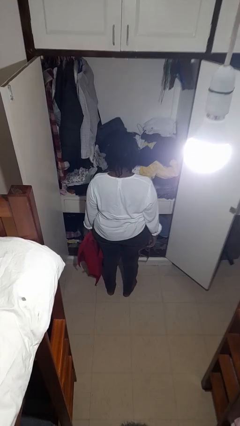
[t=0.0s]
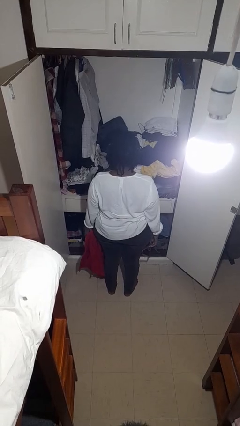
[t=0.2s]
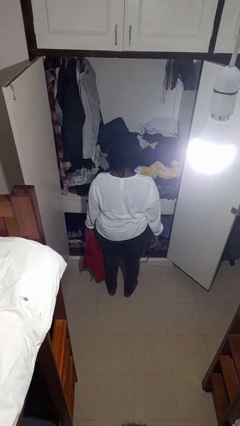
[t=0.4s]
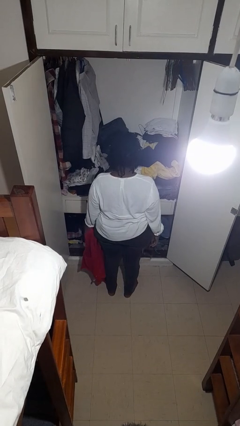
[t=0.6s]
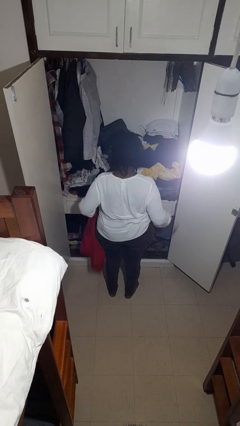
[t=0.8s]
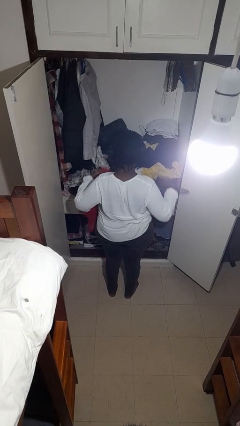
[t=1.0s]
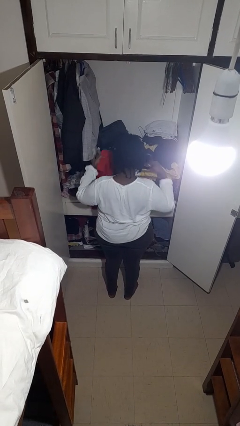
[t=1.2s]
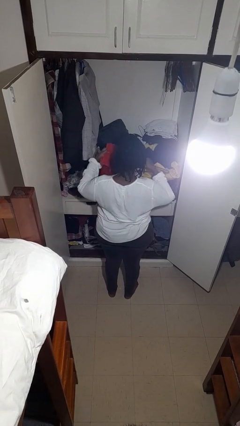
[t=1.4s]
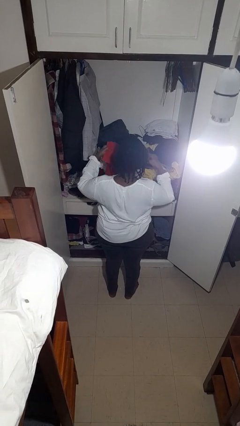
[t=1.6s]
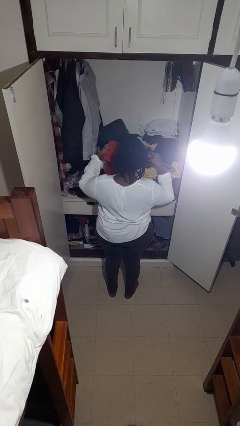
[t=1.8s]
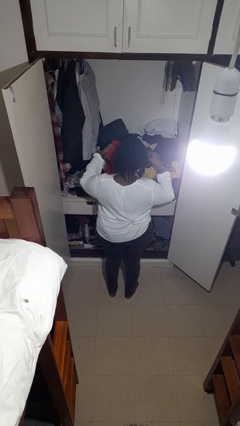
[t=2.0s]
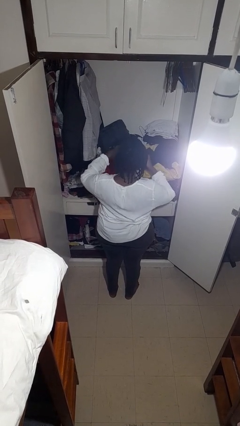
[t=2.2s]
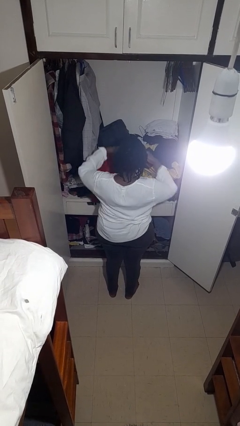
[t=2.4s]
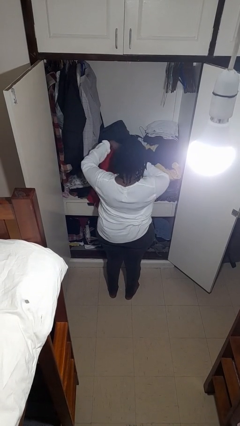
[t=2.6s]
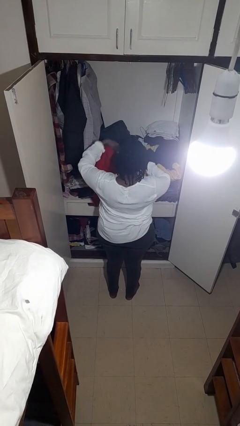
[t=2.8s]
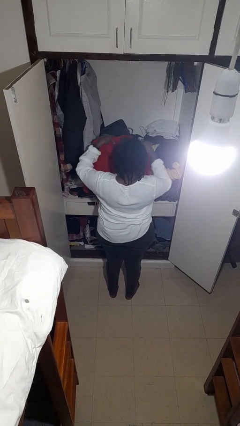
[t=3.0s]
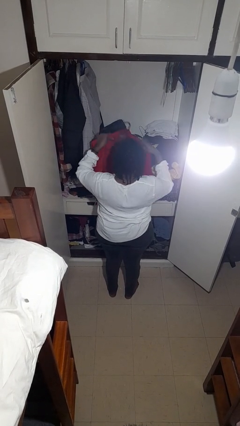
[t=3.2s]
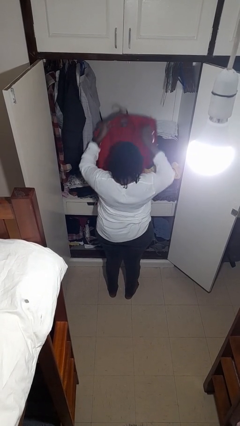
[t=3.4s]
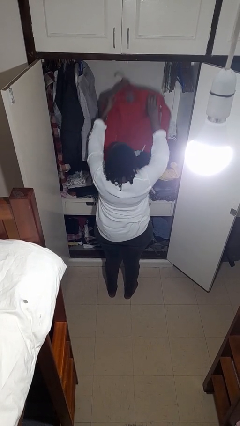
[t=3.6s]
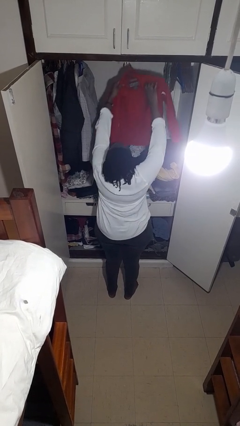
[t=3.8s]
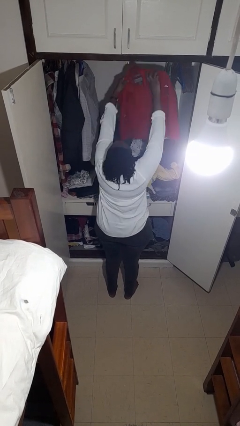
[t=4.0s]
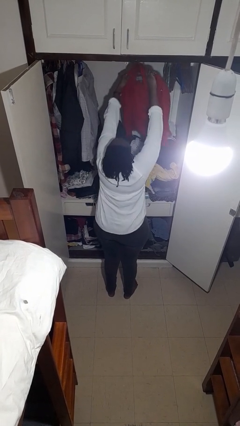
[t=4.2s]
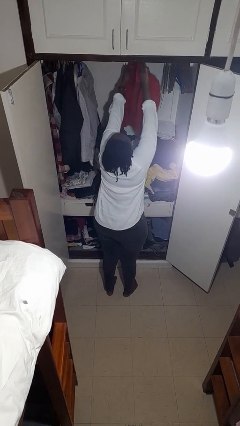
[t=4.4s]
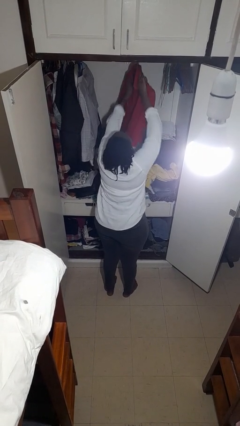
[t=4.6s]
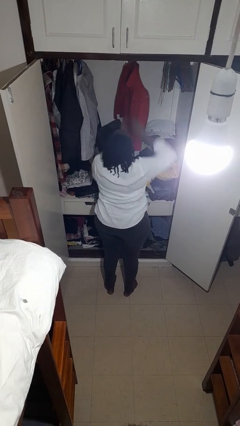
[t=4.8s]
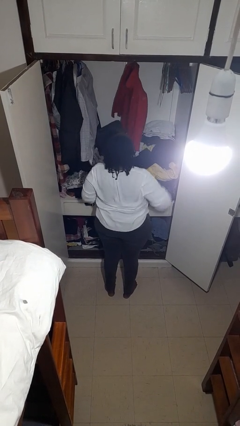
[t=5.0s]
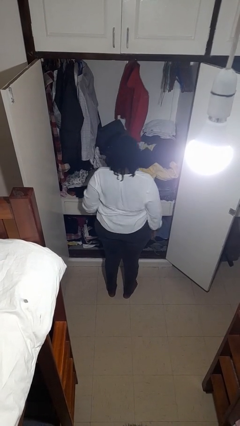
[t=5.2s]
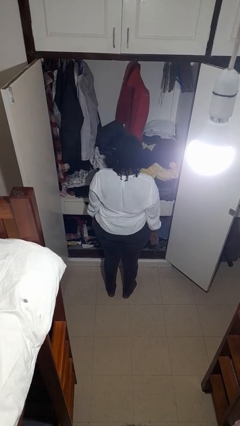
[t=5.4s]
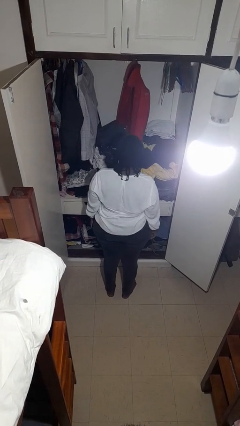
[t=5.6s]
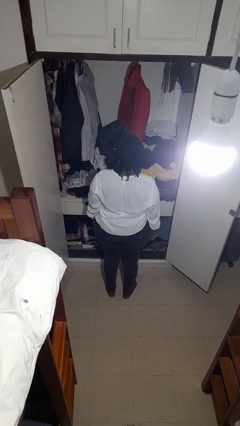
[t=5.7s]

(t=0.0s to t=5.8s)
person puts clothes into closet

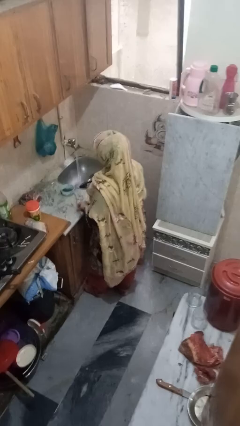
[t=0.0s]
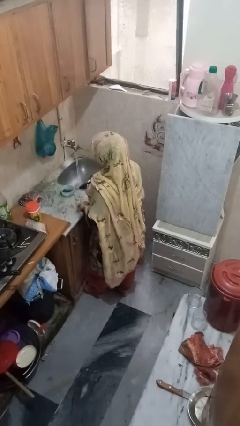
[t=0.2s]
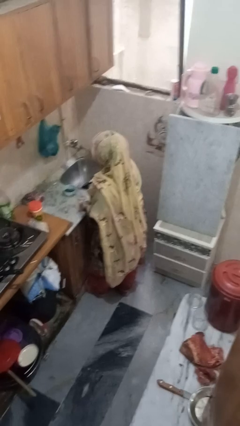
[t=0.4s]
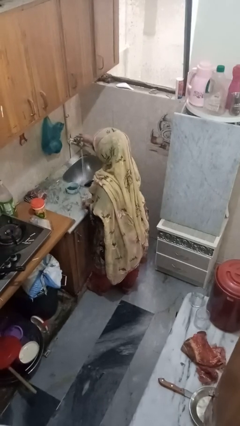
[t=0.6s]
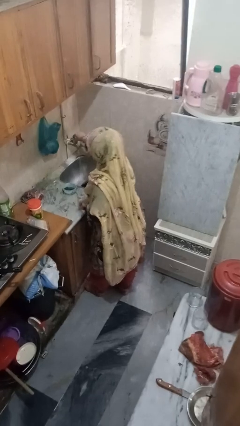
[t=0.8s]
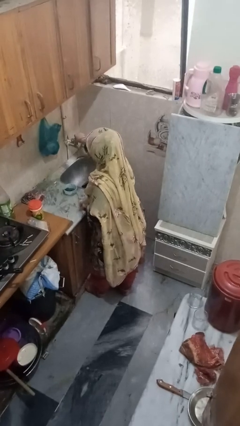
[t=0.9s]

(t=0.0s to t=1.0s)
person turns off faucet

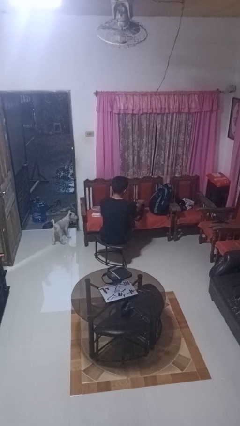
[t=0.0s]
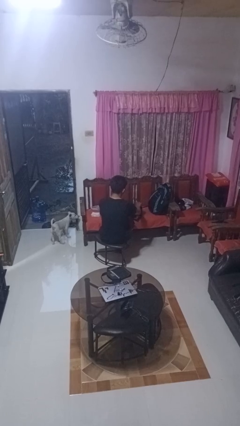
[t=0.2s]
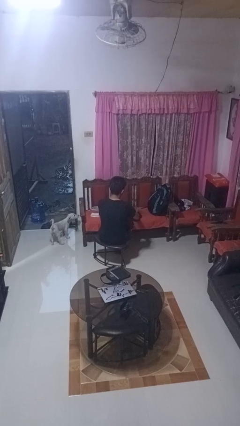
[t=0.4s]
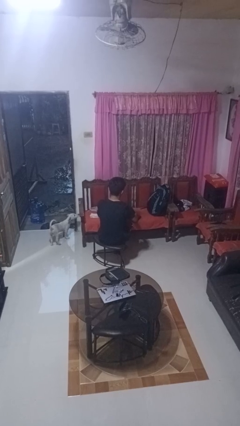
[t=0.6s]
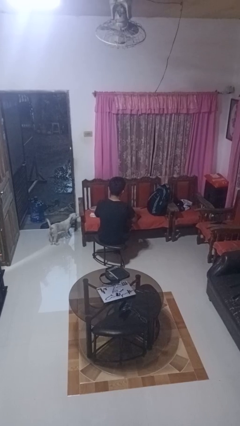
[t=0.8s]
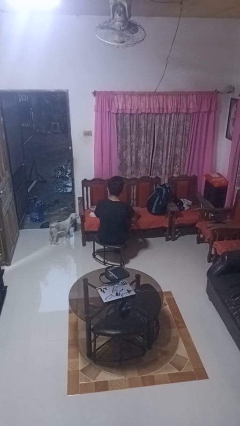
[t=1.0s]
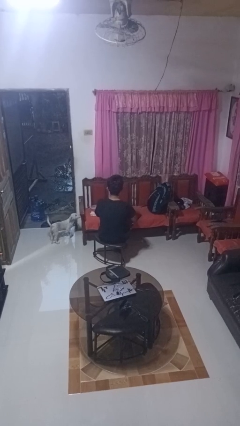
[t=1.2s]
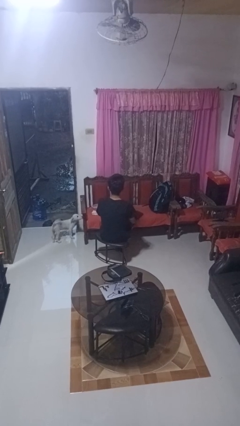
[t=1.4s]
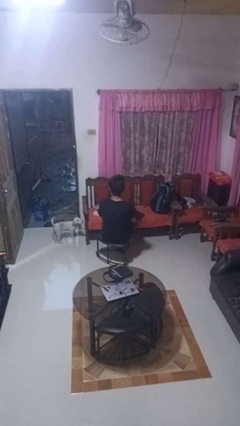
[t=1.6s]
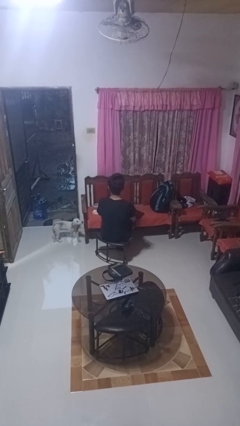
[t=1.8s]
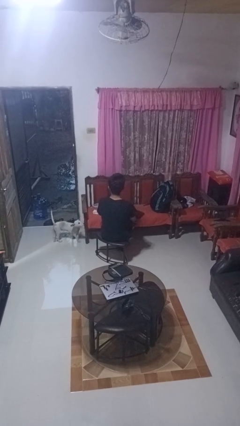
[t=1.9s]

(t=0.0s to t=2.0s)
person closes laptop

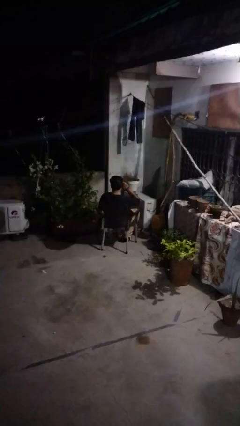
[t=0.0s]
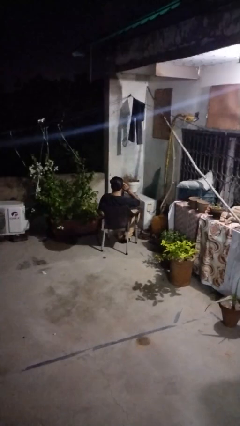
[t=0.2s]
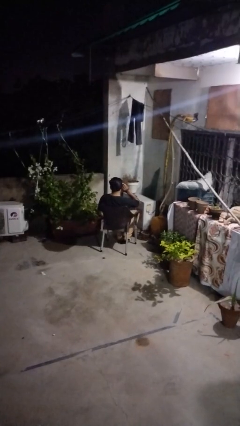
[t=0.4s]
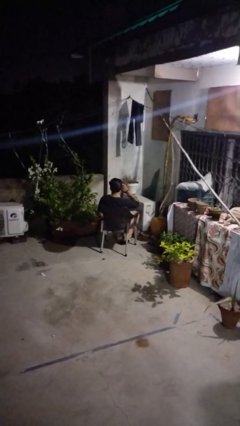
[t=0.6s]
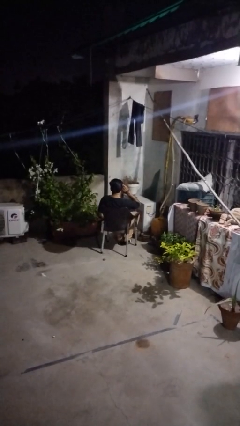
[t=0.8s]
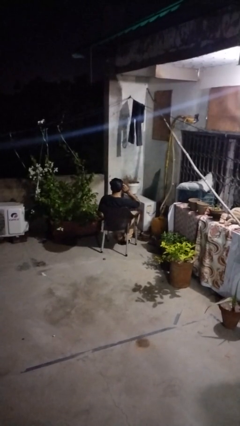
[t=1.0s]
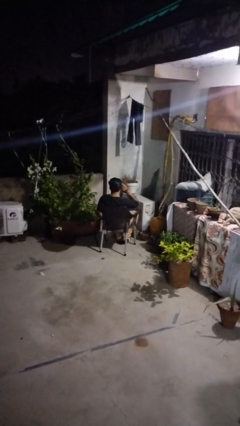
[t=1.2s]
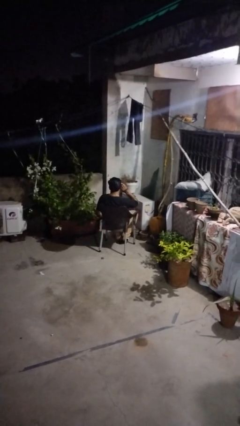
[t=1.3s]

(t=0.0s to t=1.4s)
person gestures listen closely

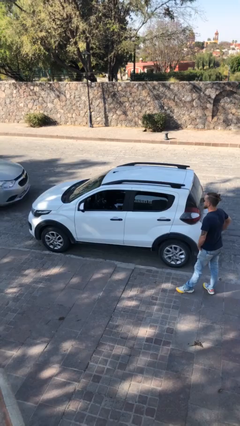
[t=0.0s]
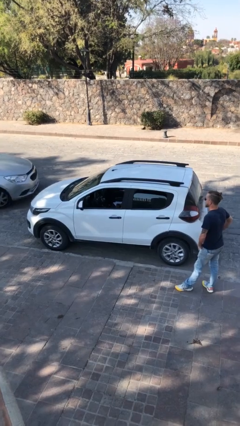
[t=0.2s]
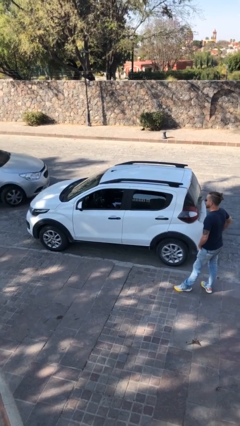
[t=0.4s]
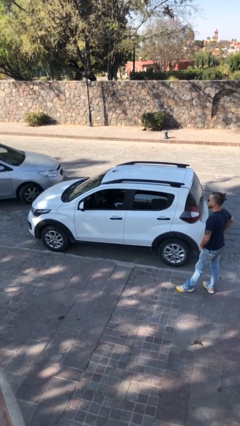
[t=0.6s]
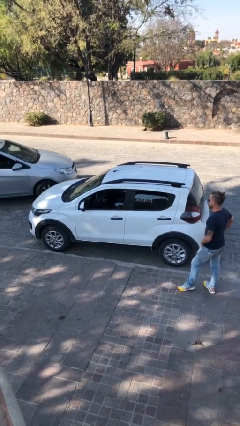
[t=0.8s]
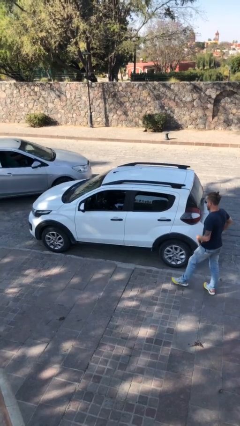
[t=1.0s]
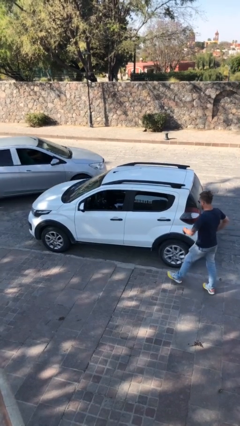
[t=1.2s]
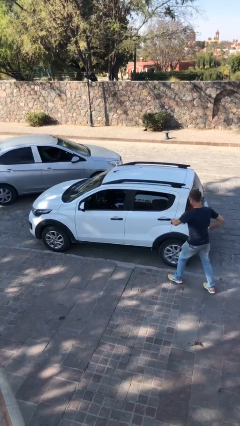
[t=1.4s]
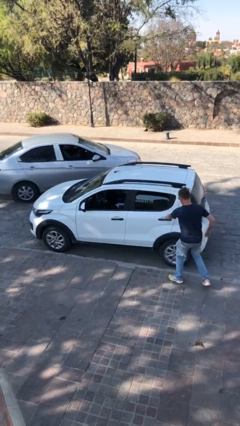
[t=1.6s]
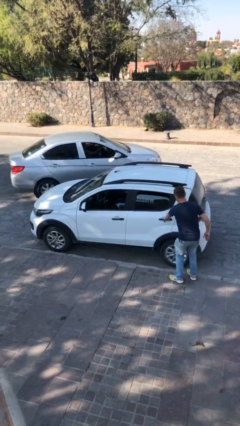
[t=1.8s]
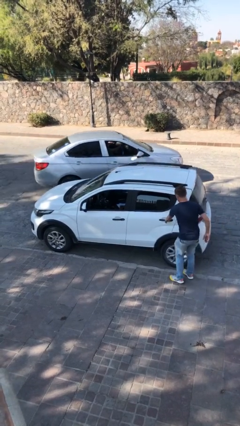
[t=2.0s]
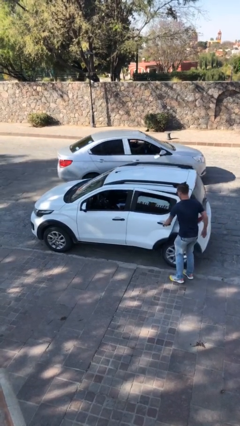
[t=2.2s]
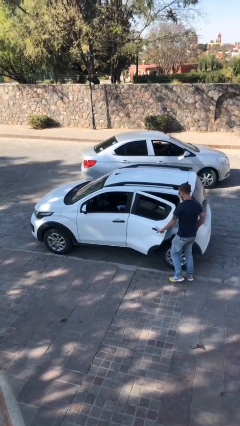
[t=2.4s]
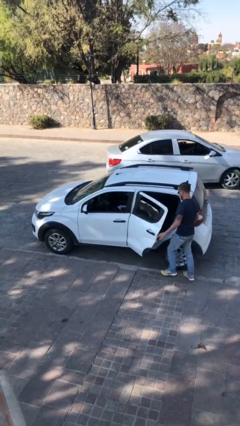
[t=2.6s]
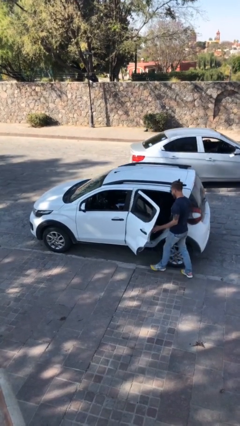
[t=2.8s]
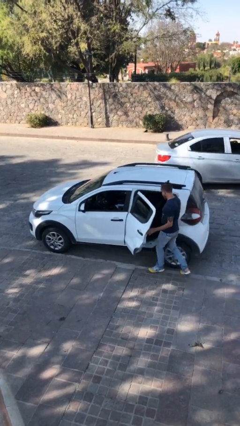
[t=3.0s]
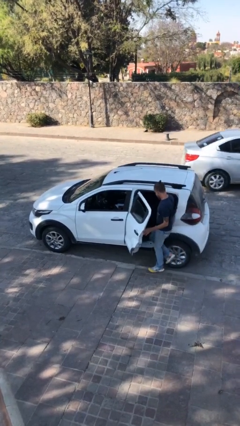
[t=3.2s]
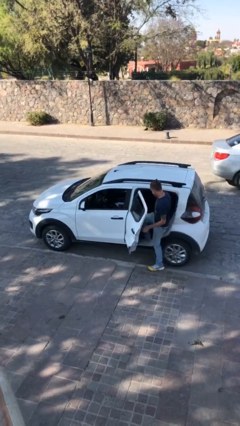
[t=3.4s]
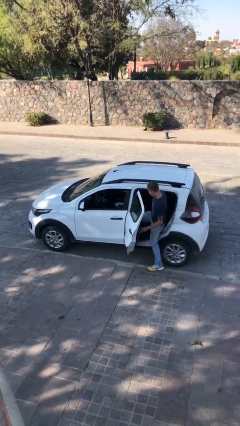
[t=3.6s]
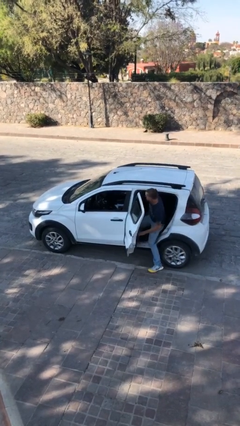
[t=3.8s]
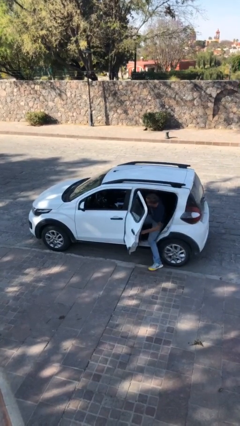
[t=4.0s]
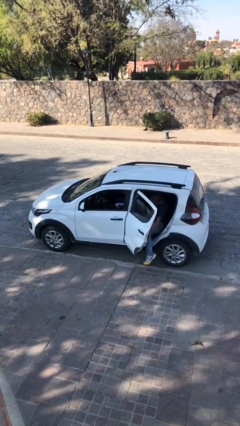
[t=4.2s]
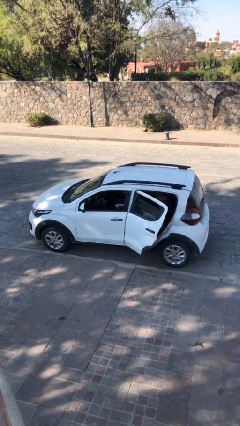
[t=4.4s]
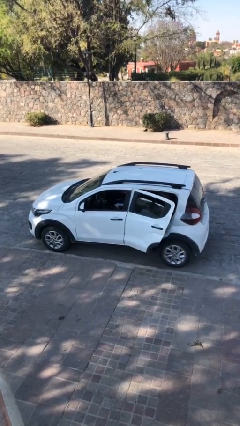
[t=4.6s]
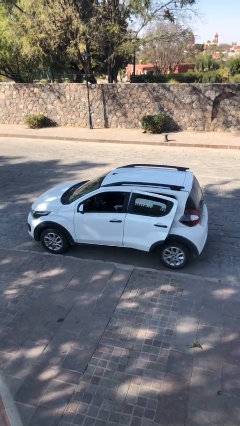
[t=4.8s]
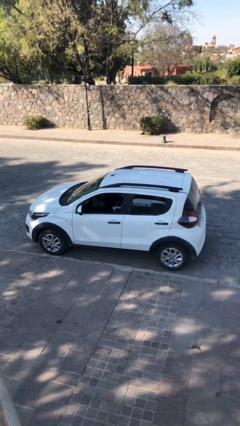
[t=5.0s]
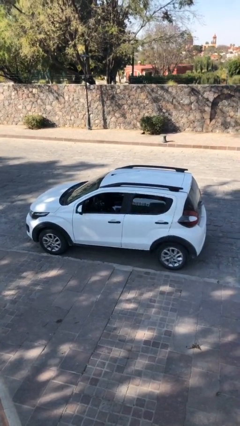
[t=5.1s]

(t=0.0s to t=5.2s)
car picks up person

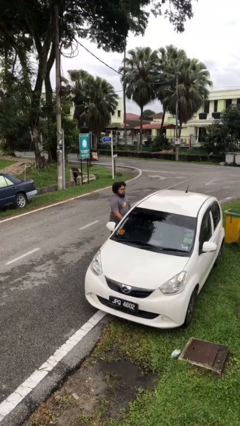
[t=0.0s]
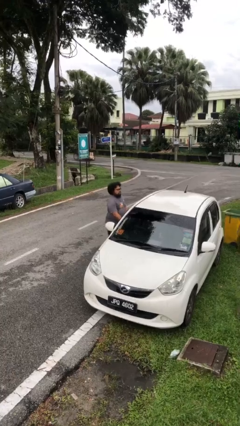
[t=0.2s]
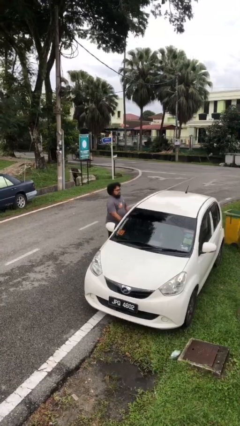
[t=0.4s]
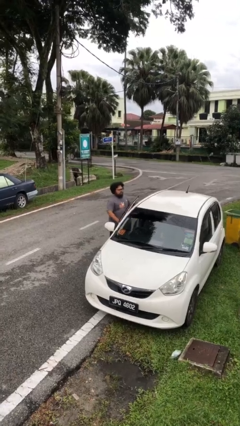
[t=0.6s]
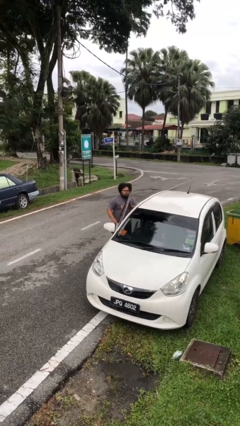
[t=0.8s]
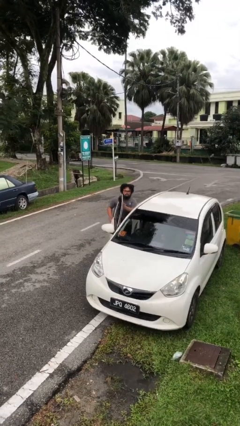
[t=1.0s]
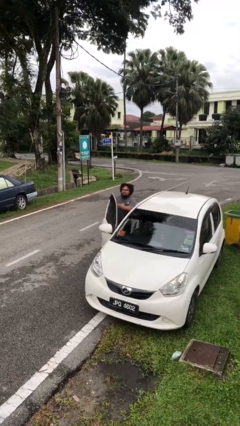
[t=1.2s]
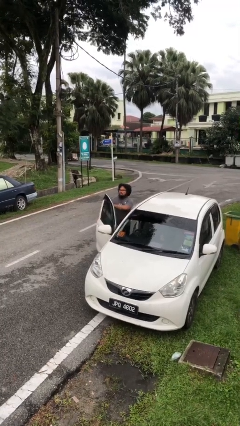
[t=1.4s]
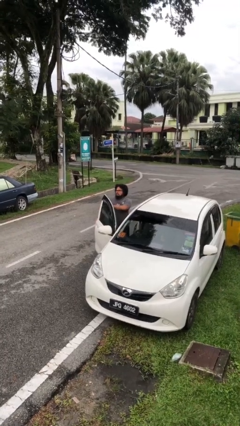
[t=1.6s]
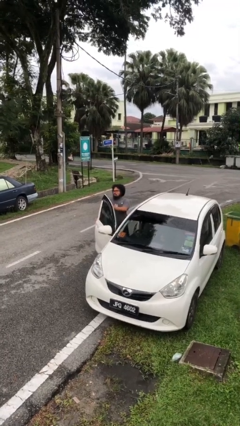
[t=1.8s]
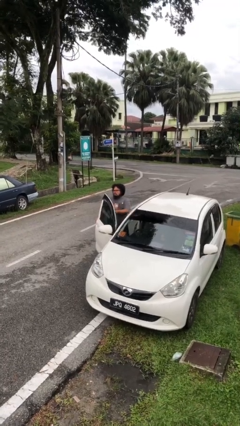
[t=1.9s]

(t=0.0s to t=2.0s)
person opens car door
